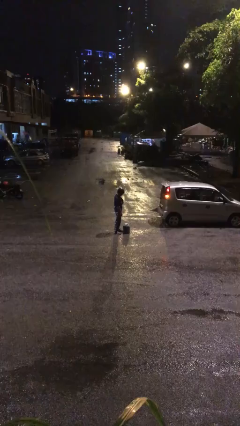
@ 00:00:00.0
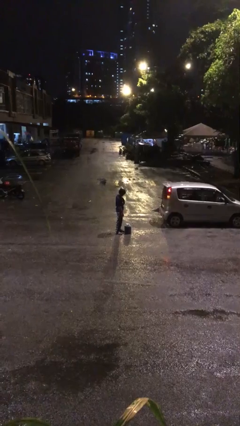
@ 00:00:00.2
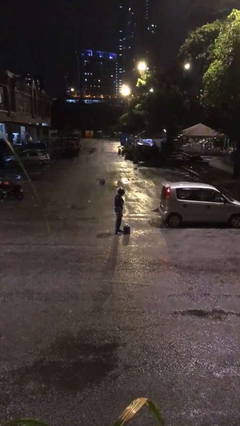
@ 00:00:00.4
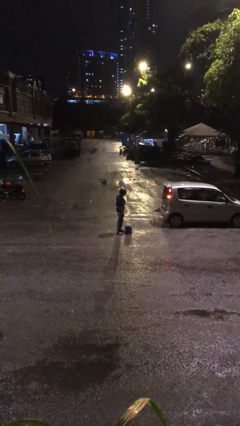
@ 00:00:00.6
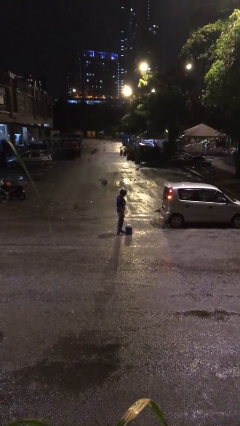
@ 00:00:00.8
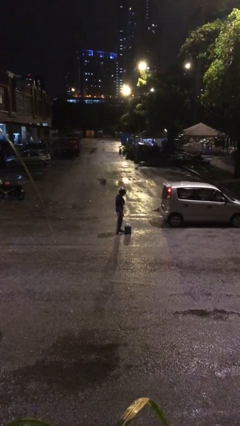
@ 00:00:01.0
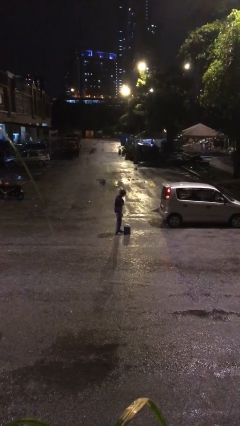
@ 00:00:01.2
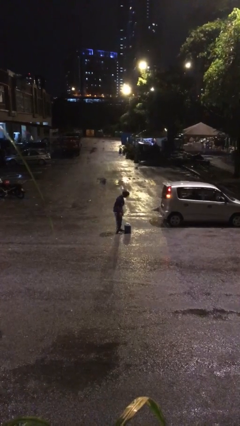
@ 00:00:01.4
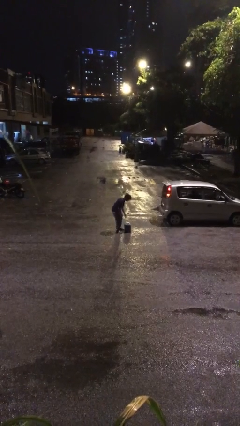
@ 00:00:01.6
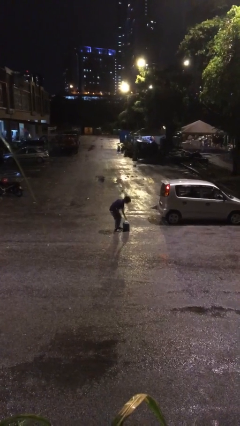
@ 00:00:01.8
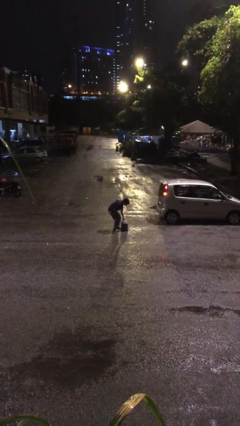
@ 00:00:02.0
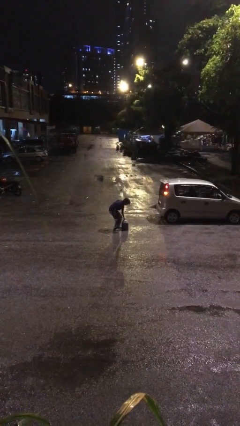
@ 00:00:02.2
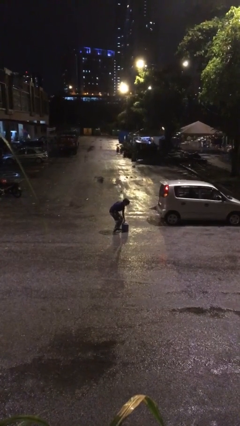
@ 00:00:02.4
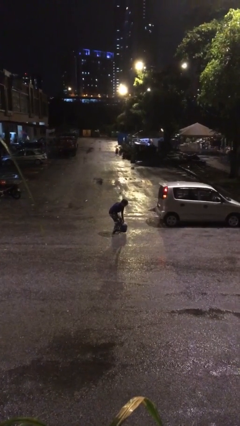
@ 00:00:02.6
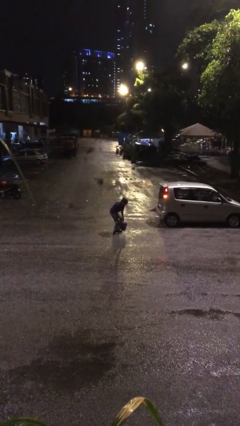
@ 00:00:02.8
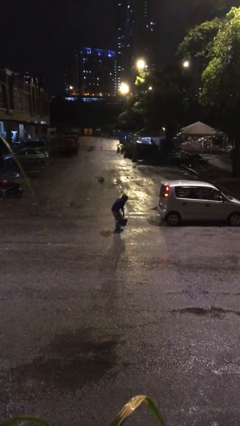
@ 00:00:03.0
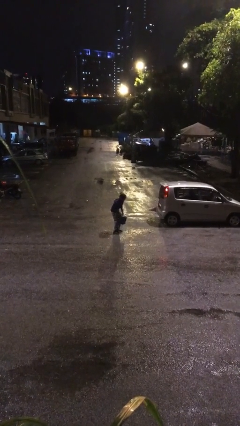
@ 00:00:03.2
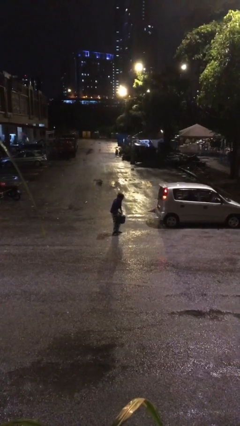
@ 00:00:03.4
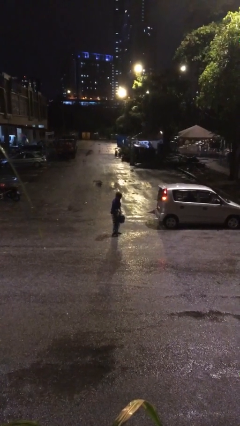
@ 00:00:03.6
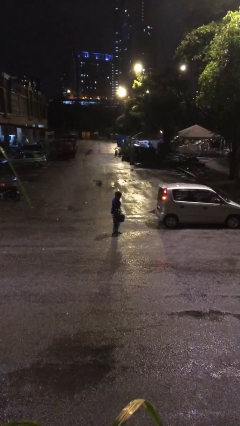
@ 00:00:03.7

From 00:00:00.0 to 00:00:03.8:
person picks up object from floor

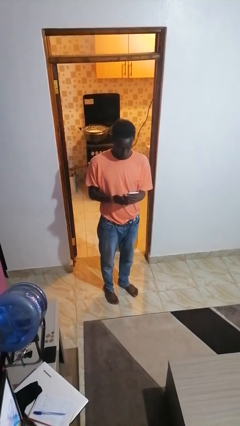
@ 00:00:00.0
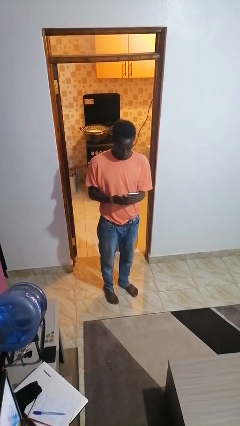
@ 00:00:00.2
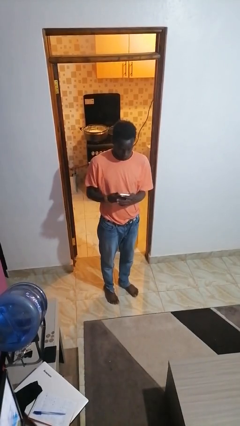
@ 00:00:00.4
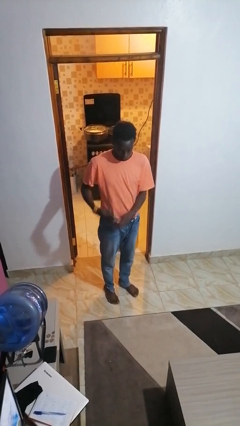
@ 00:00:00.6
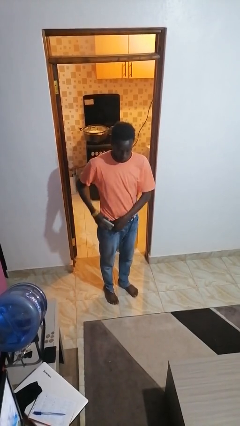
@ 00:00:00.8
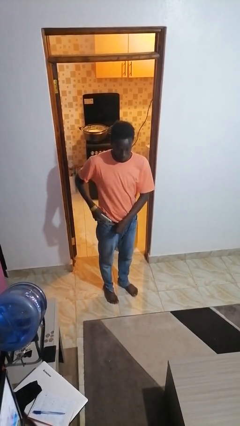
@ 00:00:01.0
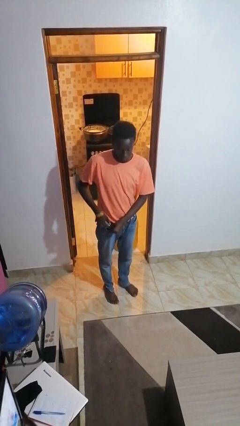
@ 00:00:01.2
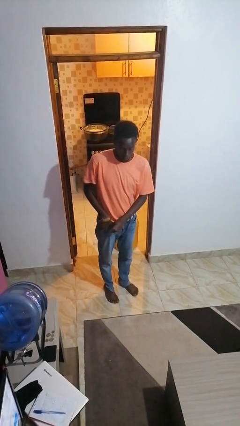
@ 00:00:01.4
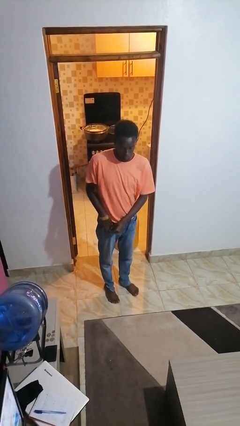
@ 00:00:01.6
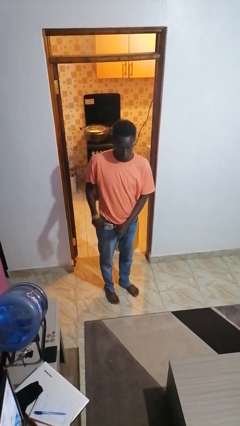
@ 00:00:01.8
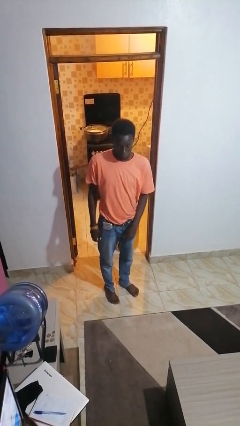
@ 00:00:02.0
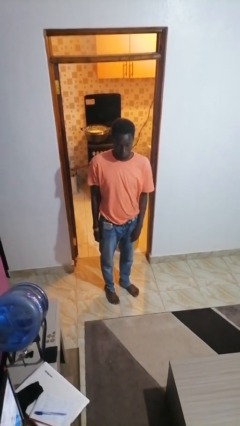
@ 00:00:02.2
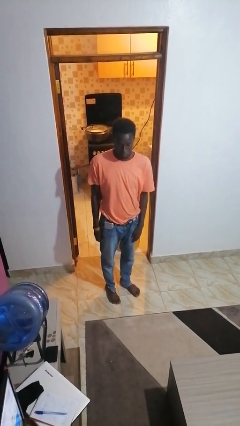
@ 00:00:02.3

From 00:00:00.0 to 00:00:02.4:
person puts phone into pocket

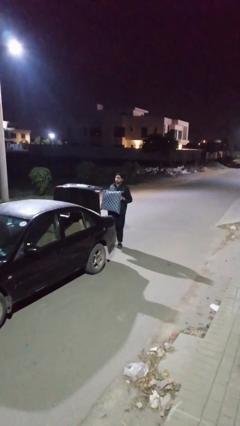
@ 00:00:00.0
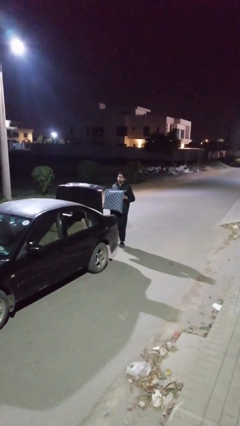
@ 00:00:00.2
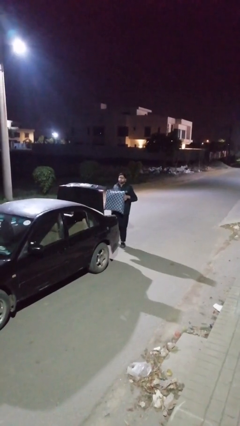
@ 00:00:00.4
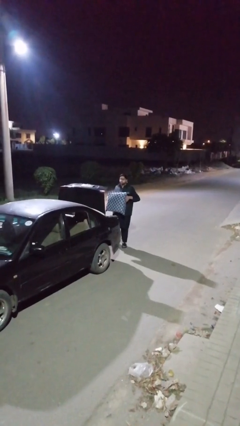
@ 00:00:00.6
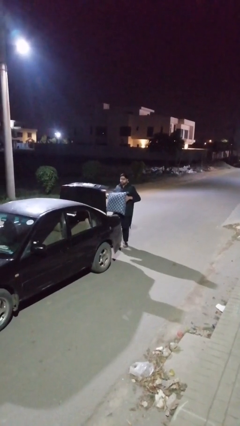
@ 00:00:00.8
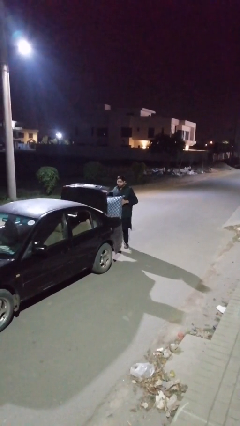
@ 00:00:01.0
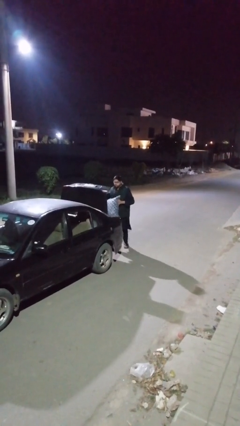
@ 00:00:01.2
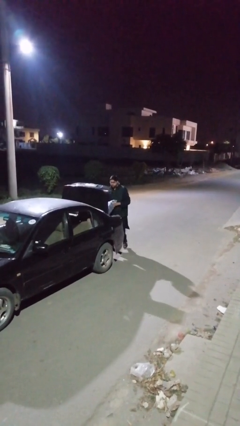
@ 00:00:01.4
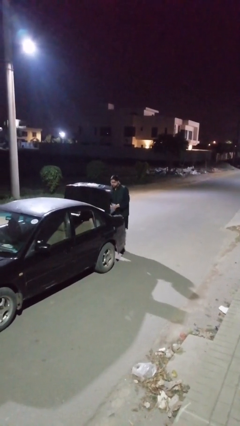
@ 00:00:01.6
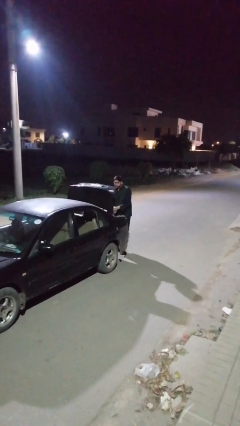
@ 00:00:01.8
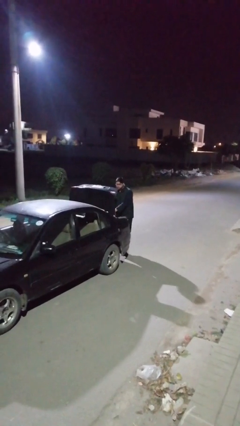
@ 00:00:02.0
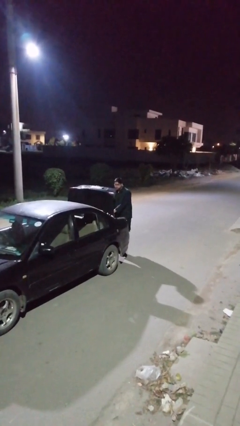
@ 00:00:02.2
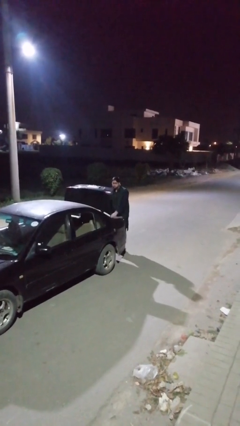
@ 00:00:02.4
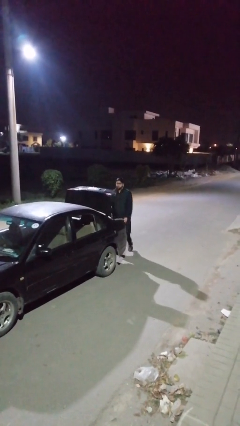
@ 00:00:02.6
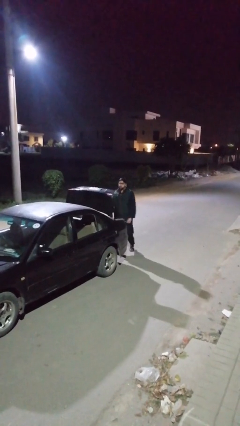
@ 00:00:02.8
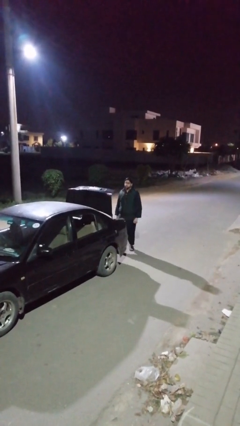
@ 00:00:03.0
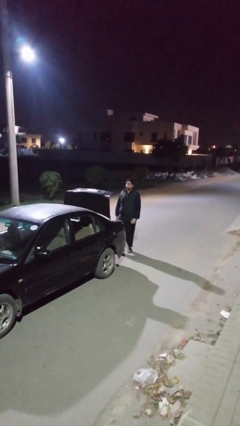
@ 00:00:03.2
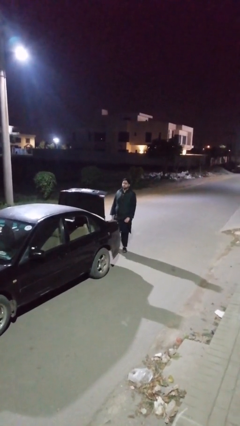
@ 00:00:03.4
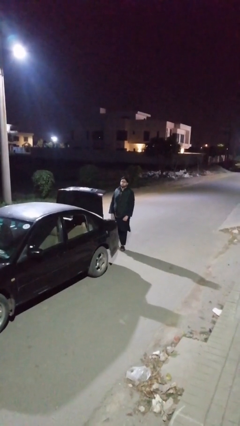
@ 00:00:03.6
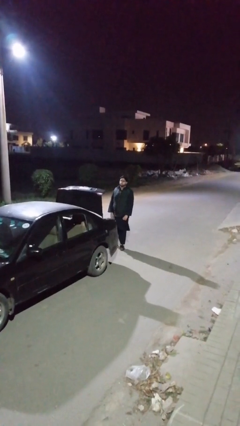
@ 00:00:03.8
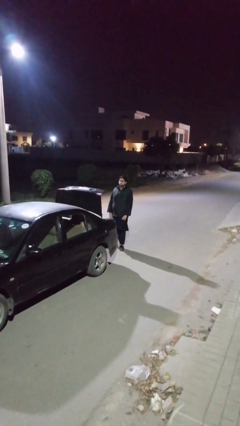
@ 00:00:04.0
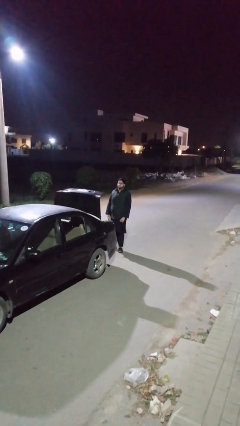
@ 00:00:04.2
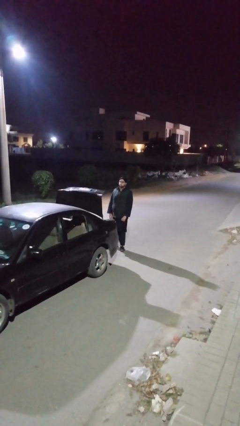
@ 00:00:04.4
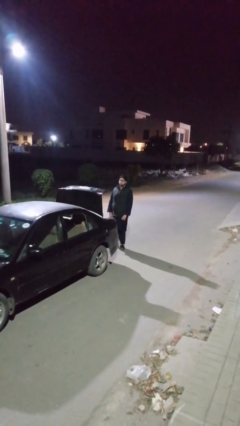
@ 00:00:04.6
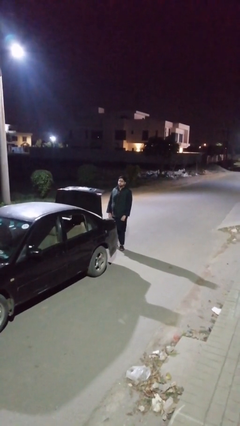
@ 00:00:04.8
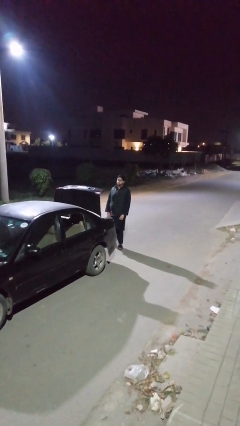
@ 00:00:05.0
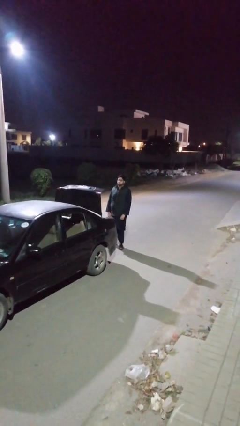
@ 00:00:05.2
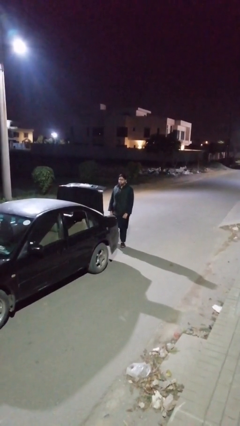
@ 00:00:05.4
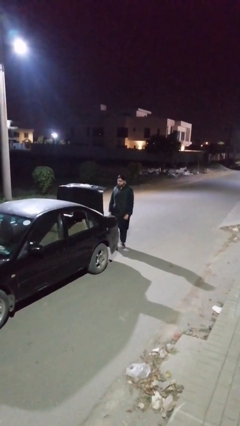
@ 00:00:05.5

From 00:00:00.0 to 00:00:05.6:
person loads car

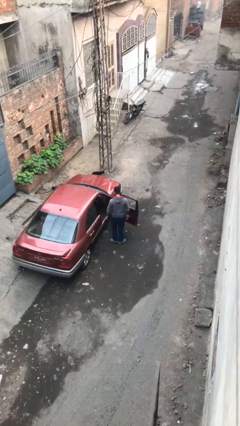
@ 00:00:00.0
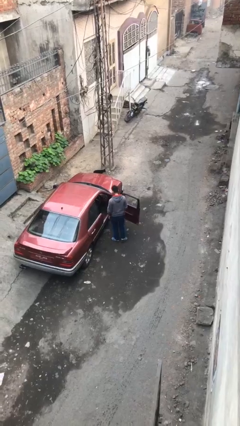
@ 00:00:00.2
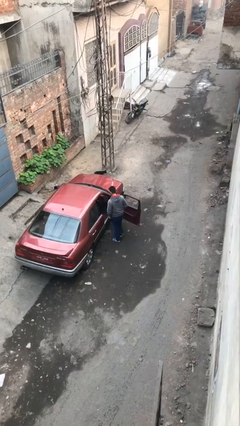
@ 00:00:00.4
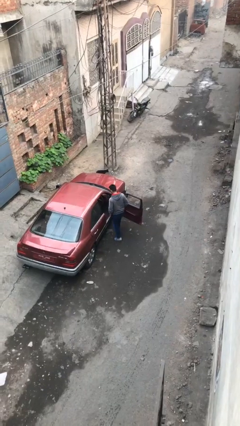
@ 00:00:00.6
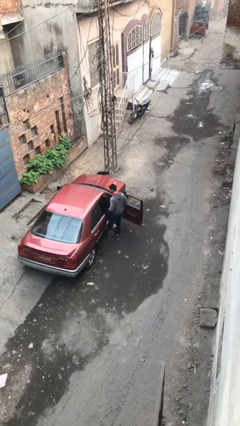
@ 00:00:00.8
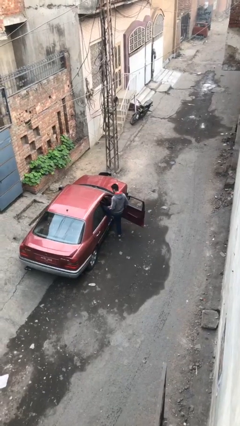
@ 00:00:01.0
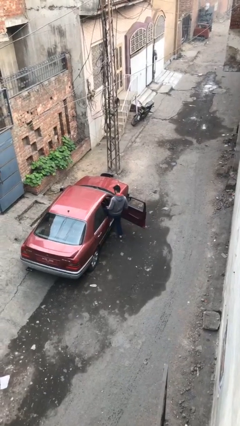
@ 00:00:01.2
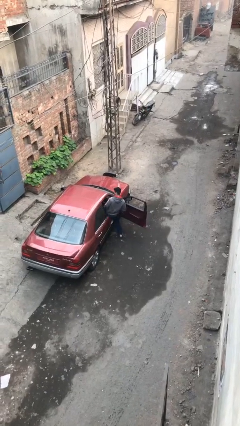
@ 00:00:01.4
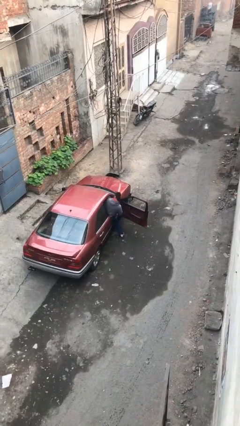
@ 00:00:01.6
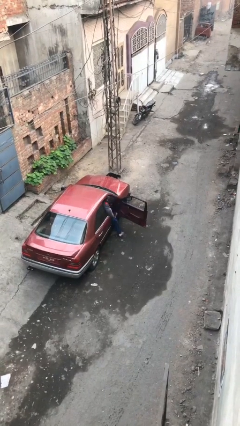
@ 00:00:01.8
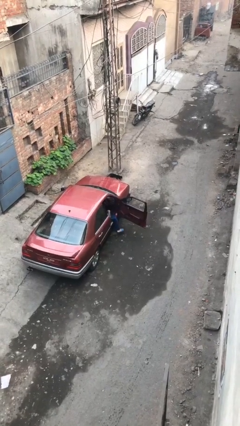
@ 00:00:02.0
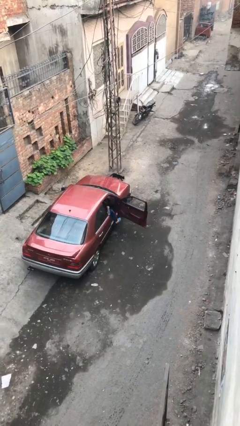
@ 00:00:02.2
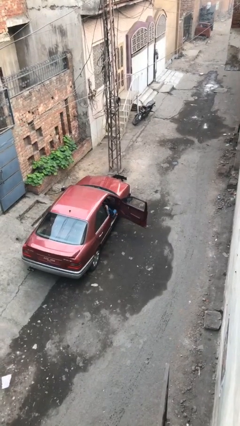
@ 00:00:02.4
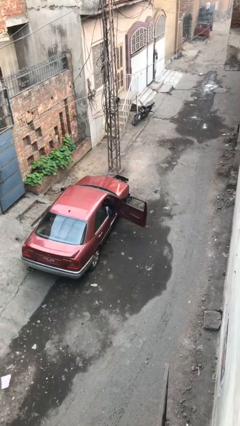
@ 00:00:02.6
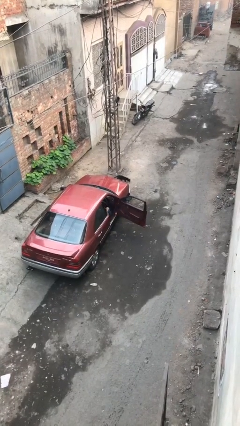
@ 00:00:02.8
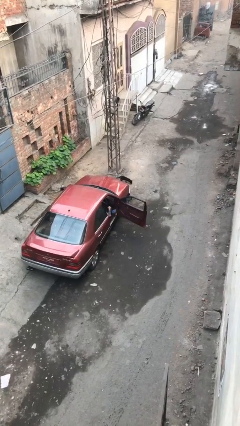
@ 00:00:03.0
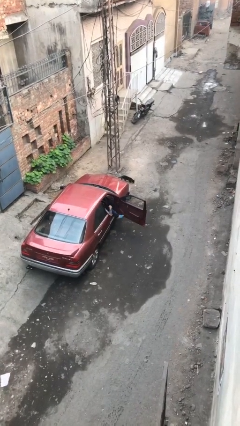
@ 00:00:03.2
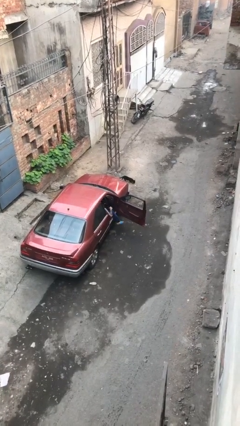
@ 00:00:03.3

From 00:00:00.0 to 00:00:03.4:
person enters car

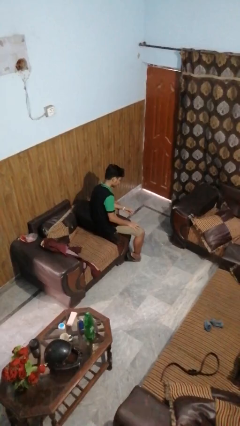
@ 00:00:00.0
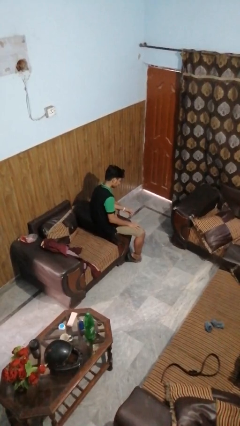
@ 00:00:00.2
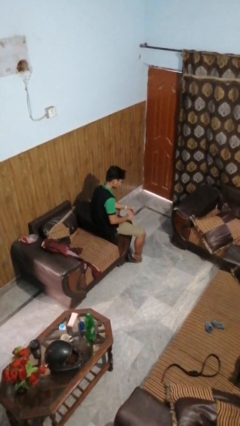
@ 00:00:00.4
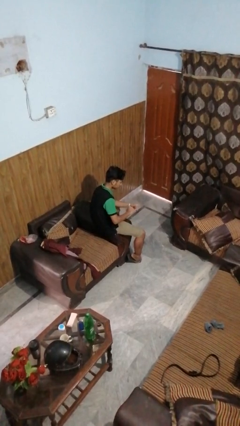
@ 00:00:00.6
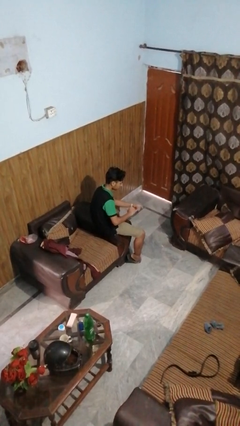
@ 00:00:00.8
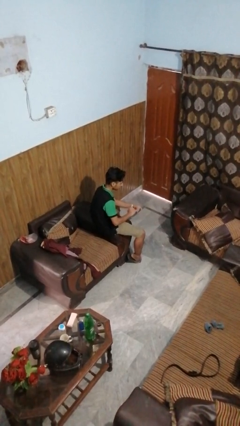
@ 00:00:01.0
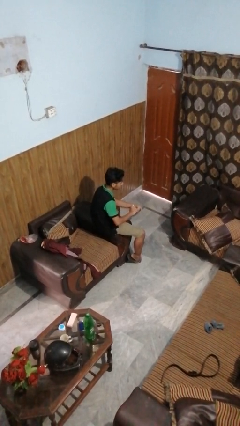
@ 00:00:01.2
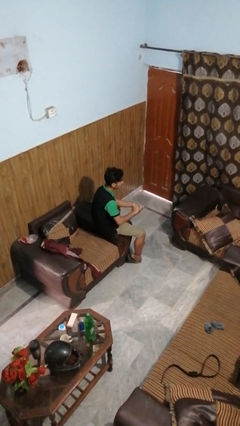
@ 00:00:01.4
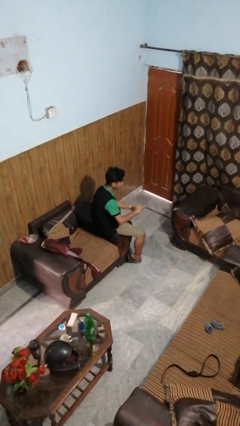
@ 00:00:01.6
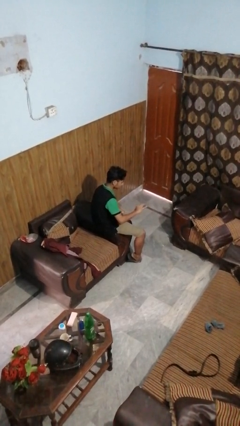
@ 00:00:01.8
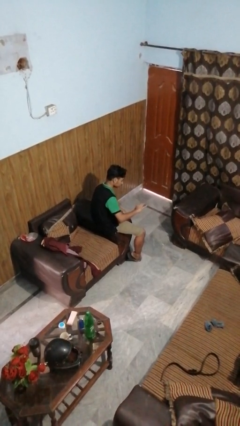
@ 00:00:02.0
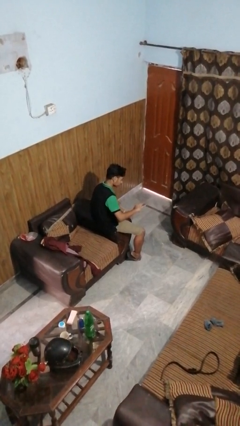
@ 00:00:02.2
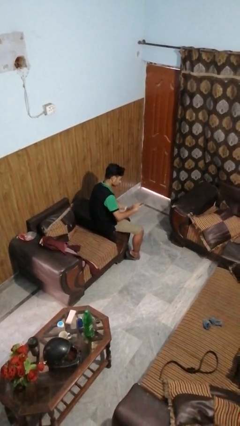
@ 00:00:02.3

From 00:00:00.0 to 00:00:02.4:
person puts on ring
